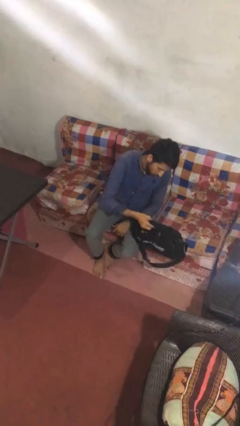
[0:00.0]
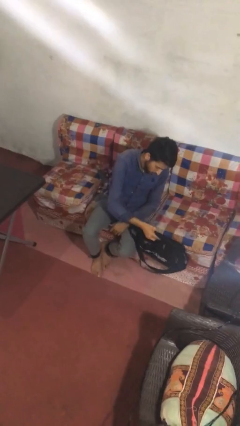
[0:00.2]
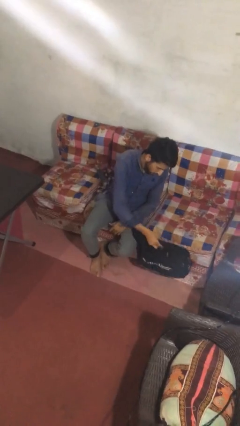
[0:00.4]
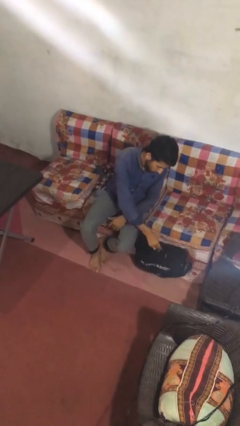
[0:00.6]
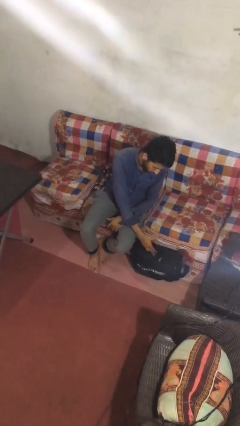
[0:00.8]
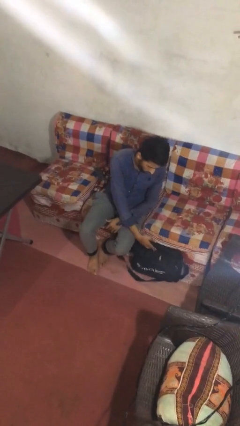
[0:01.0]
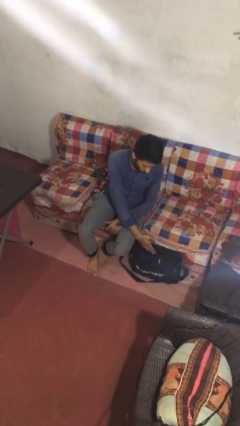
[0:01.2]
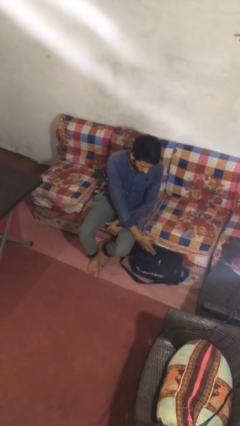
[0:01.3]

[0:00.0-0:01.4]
person puts down object on floor

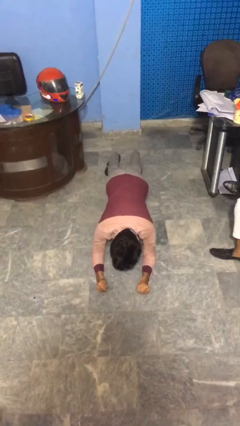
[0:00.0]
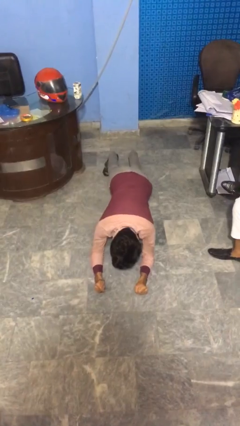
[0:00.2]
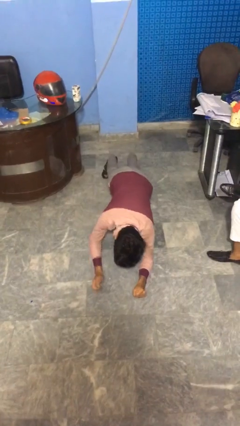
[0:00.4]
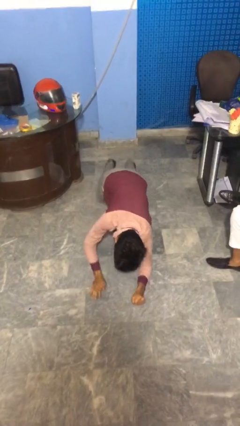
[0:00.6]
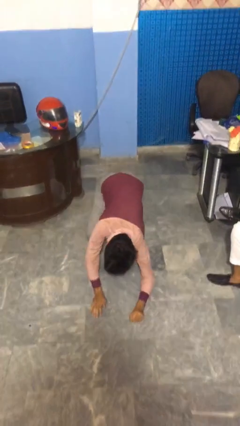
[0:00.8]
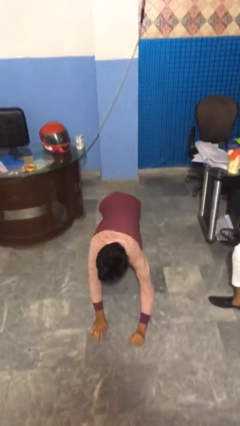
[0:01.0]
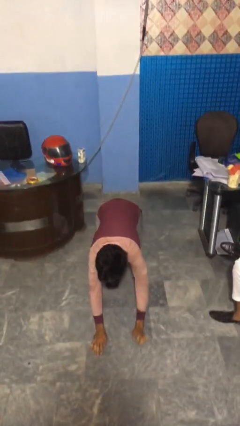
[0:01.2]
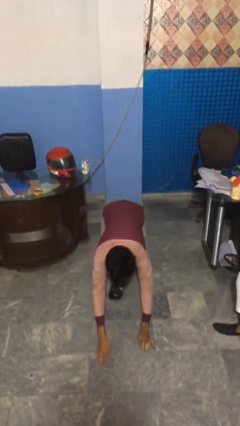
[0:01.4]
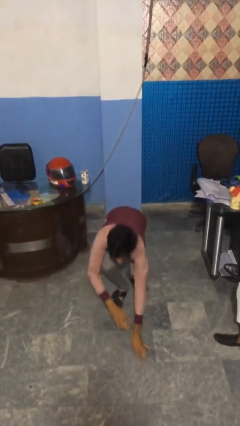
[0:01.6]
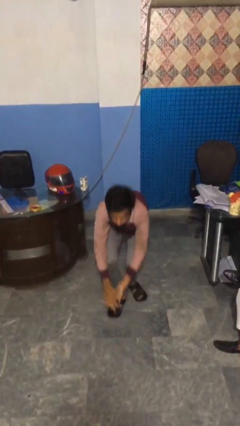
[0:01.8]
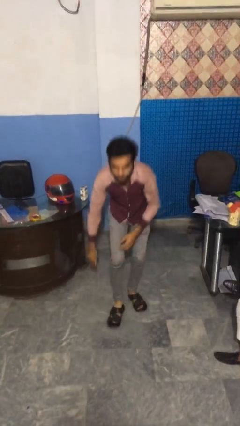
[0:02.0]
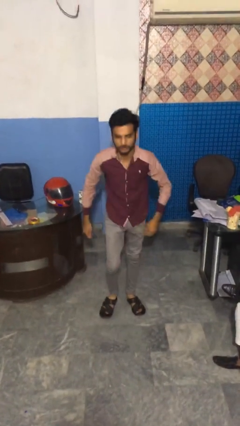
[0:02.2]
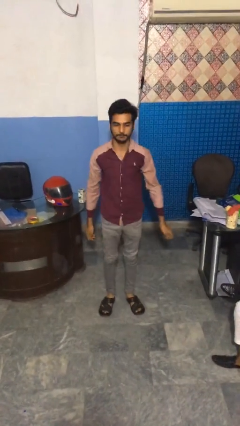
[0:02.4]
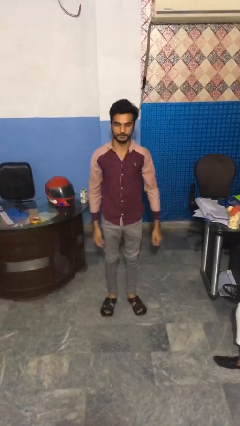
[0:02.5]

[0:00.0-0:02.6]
person stands up from floor

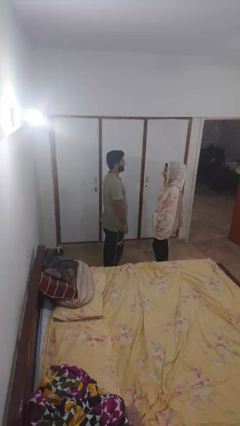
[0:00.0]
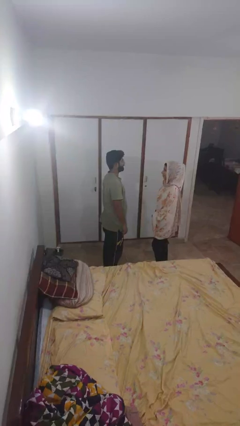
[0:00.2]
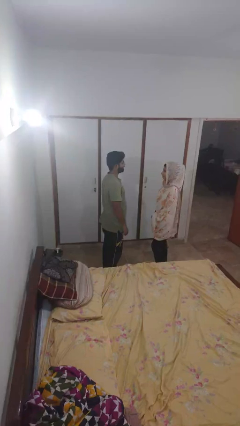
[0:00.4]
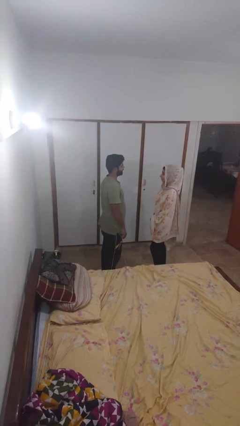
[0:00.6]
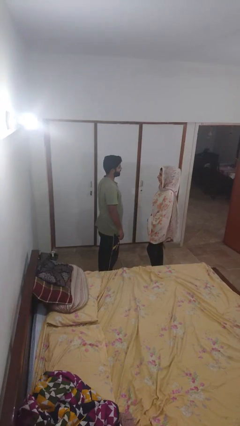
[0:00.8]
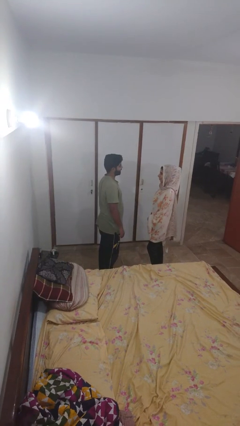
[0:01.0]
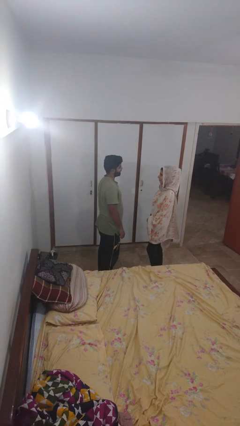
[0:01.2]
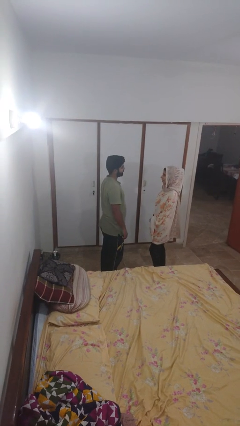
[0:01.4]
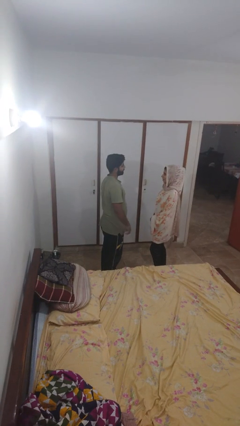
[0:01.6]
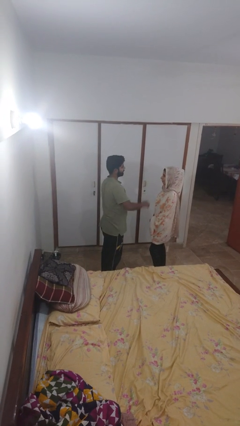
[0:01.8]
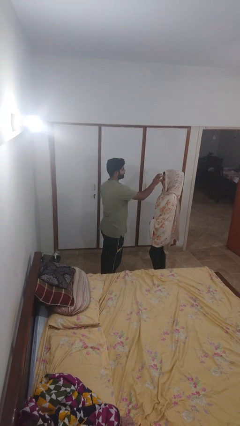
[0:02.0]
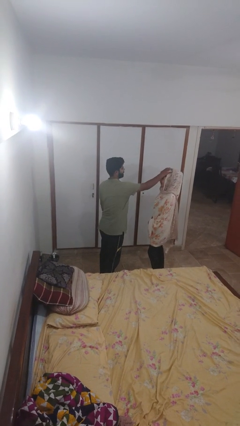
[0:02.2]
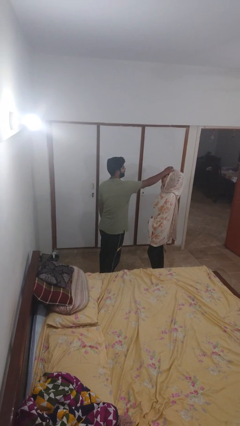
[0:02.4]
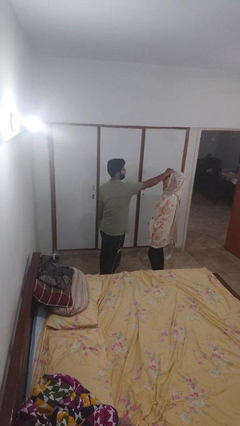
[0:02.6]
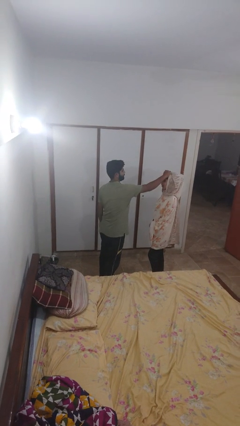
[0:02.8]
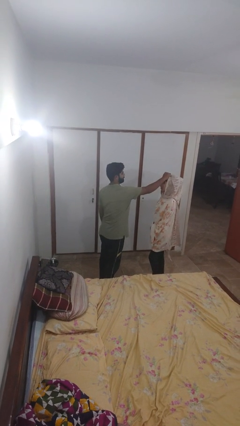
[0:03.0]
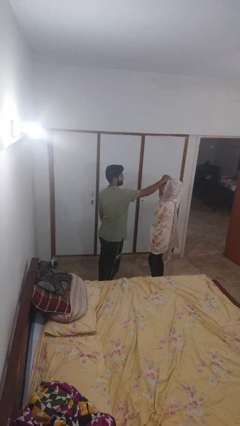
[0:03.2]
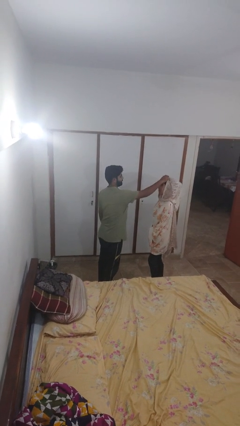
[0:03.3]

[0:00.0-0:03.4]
person grabs person by hair

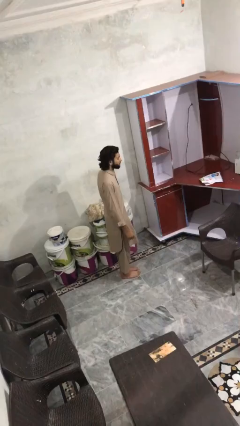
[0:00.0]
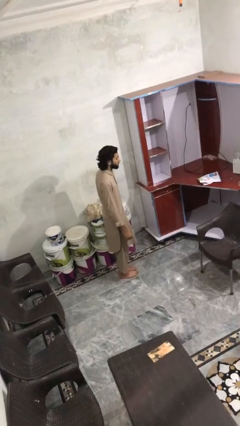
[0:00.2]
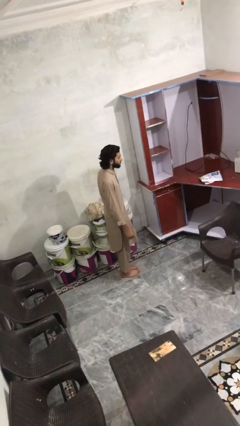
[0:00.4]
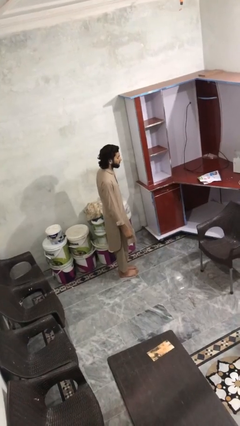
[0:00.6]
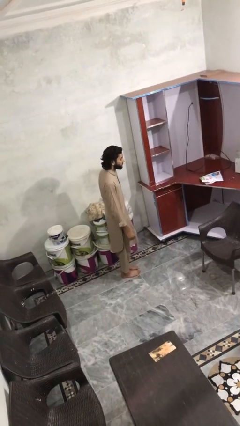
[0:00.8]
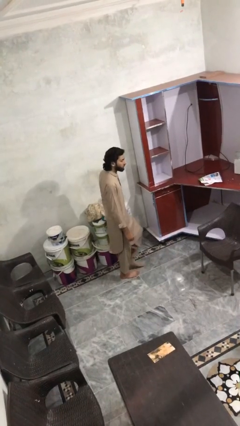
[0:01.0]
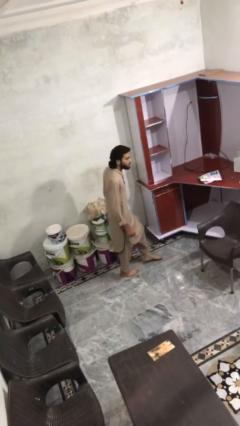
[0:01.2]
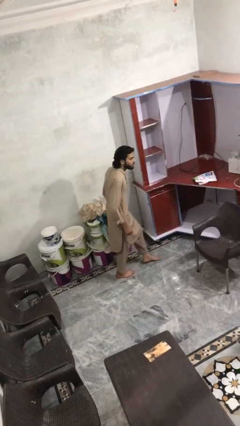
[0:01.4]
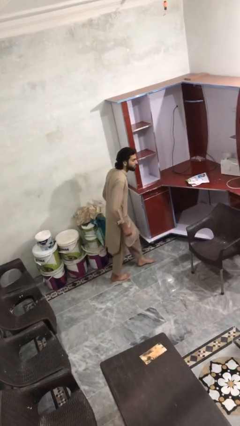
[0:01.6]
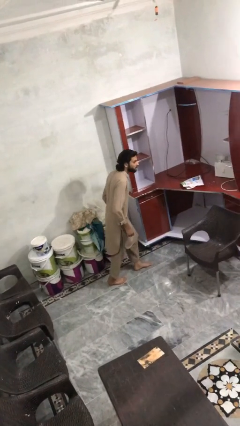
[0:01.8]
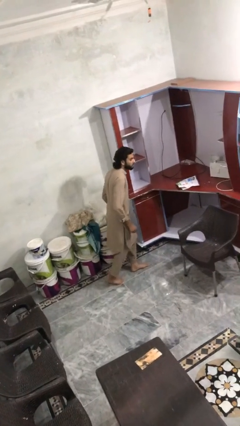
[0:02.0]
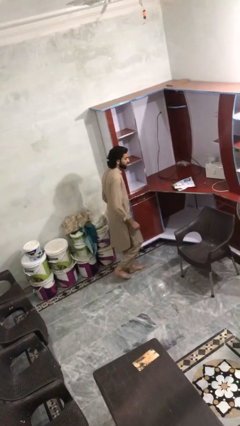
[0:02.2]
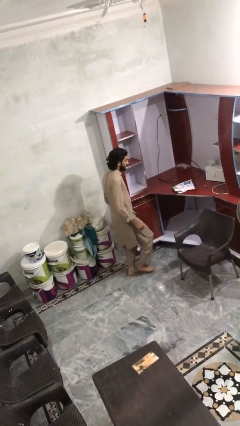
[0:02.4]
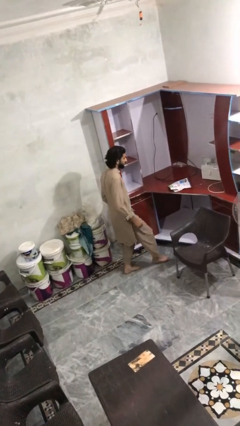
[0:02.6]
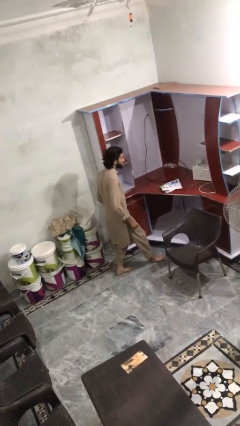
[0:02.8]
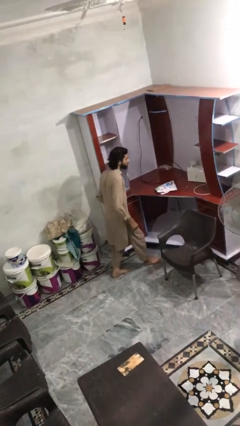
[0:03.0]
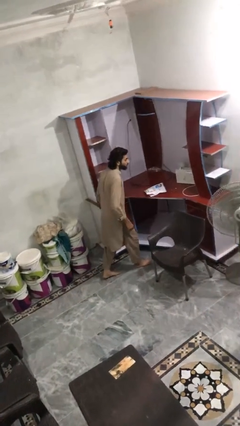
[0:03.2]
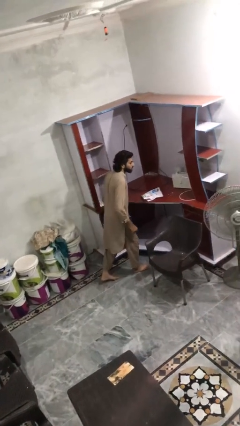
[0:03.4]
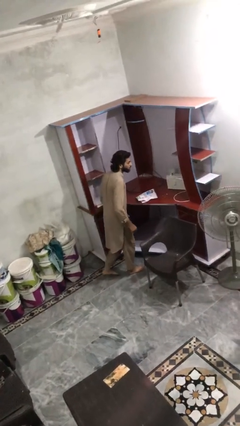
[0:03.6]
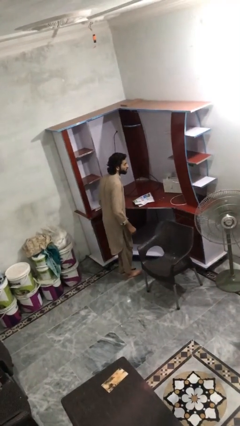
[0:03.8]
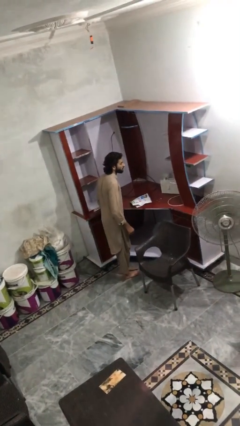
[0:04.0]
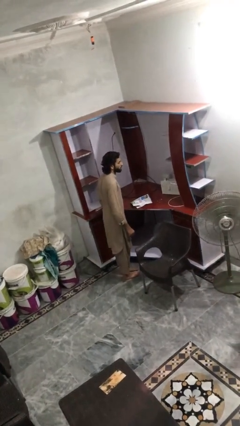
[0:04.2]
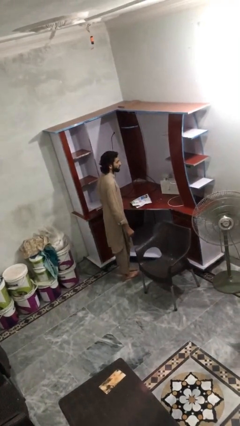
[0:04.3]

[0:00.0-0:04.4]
person walks tiptoe

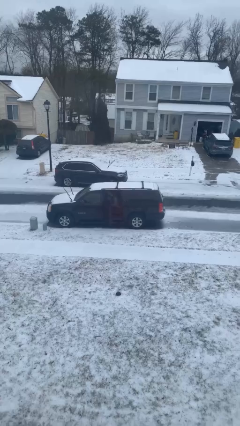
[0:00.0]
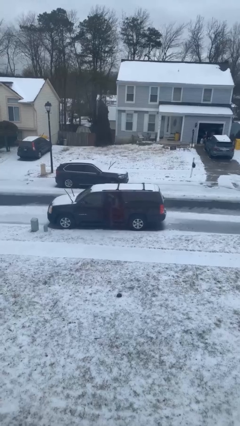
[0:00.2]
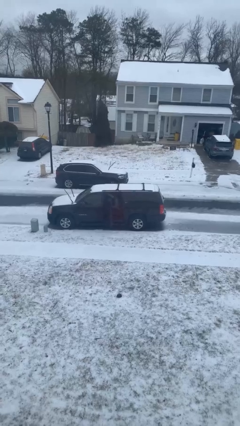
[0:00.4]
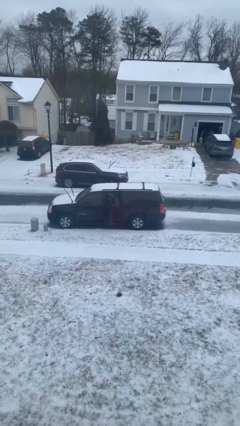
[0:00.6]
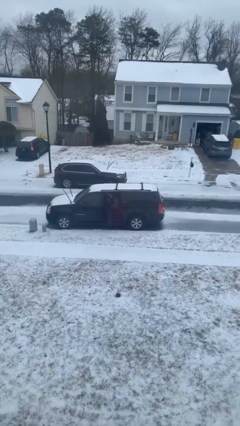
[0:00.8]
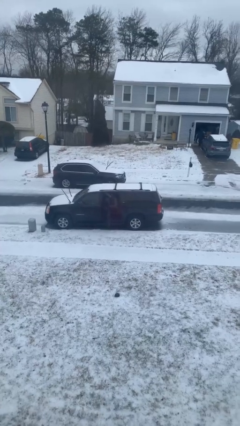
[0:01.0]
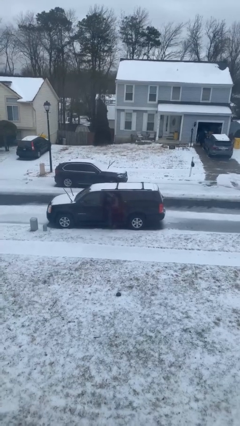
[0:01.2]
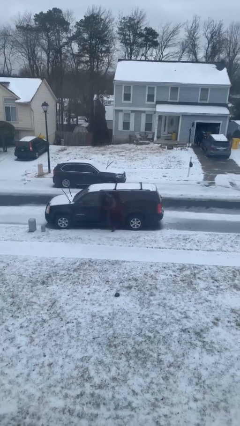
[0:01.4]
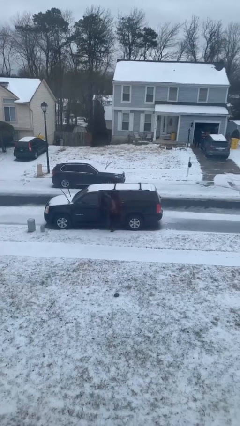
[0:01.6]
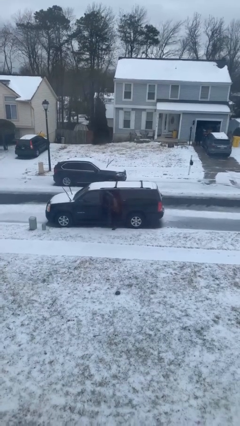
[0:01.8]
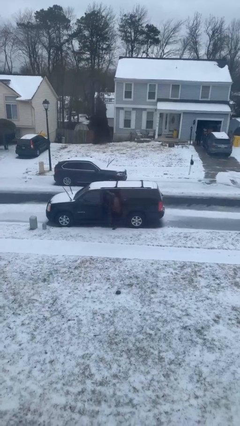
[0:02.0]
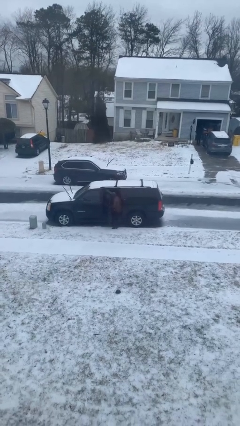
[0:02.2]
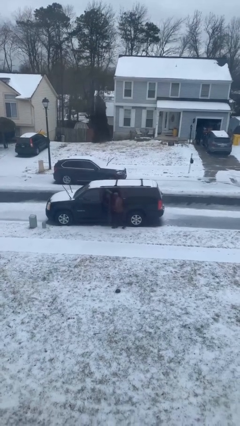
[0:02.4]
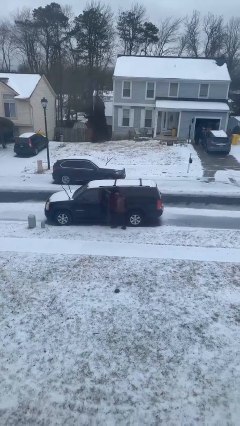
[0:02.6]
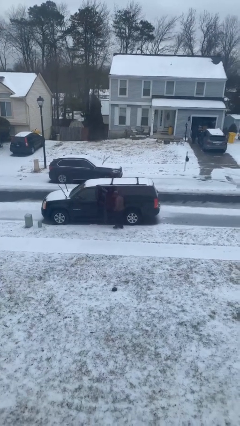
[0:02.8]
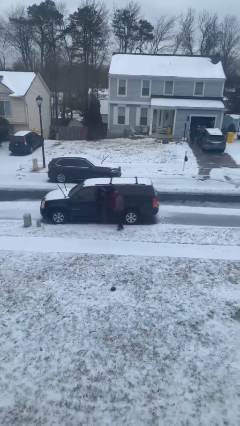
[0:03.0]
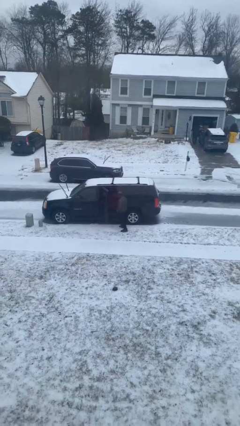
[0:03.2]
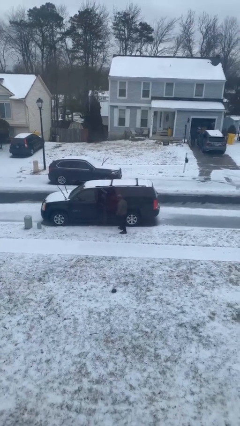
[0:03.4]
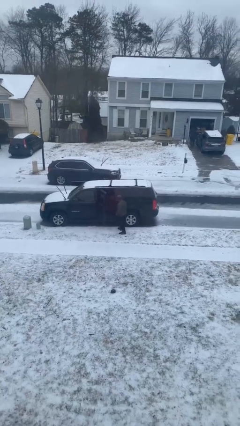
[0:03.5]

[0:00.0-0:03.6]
person exits car

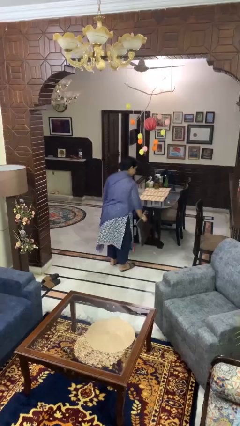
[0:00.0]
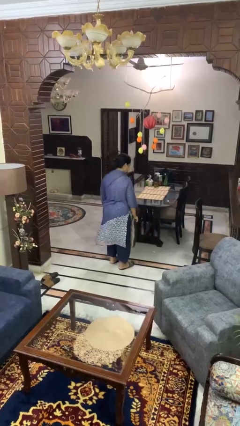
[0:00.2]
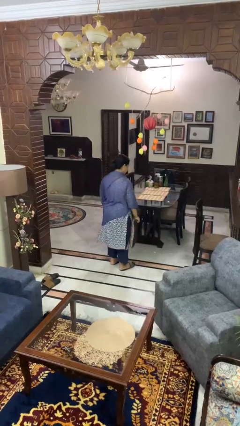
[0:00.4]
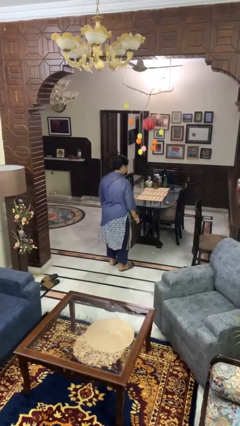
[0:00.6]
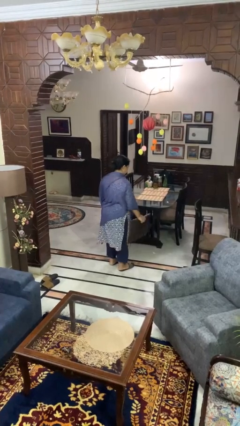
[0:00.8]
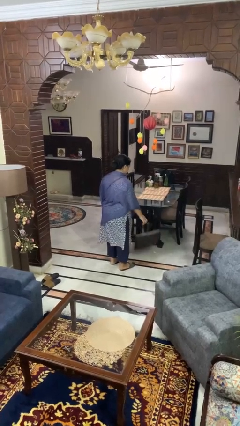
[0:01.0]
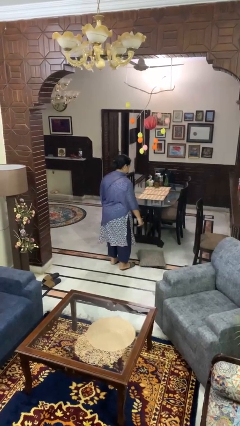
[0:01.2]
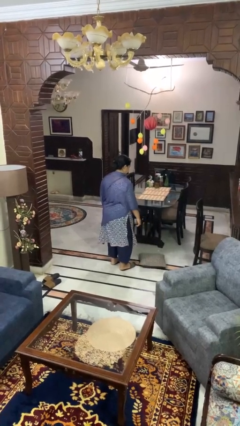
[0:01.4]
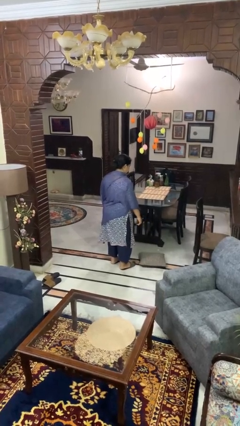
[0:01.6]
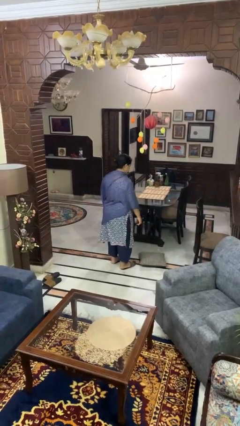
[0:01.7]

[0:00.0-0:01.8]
person throws object to ground

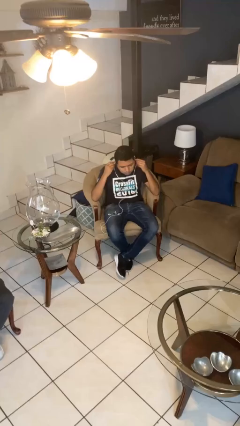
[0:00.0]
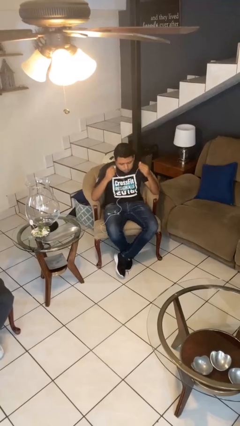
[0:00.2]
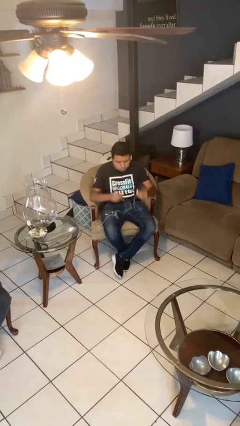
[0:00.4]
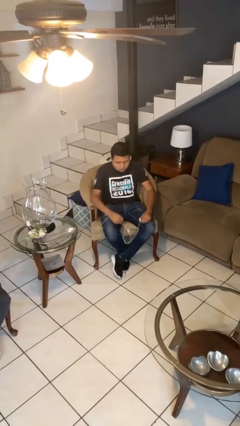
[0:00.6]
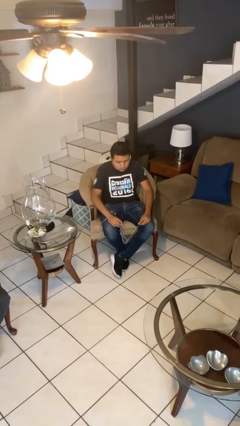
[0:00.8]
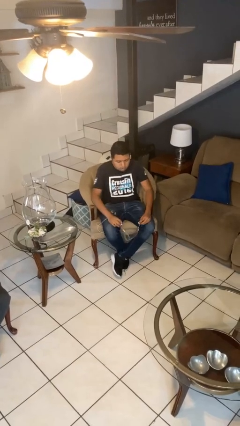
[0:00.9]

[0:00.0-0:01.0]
person takes off headphones
